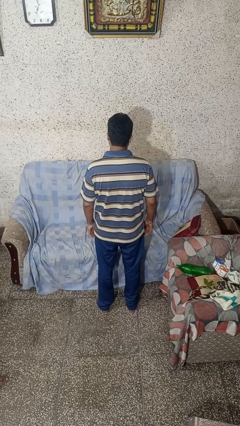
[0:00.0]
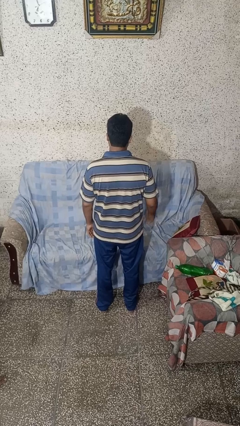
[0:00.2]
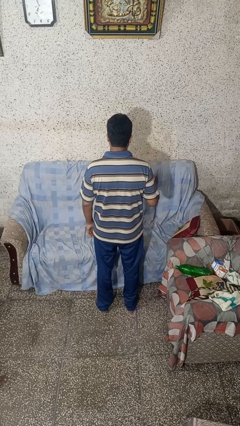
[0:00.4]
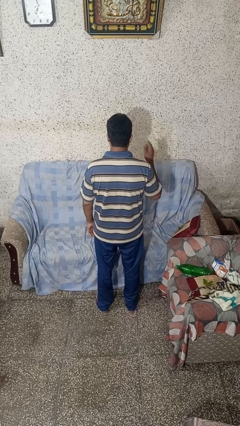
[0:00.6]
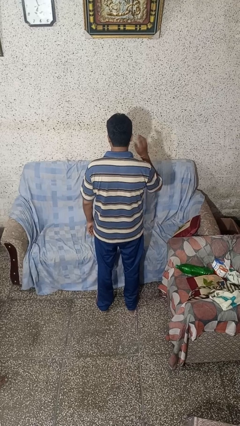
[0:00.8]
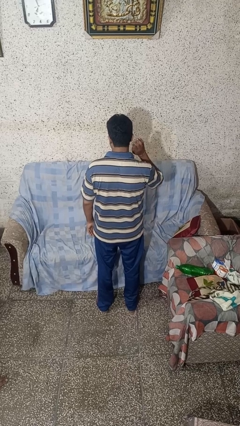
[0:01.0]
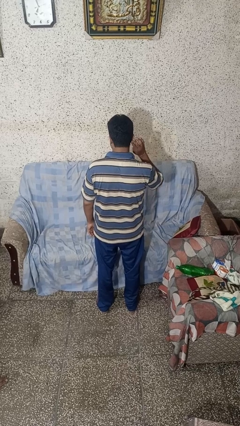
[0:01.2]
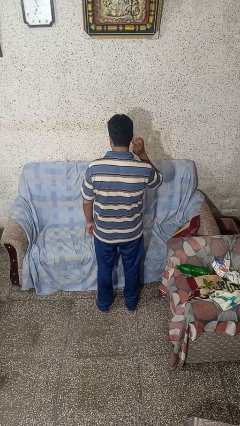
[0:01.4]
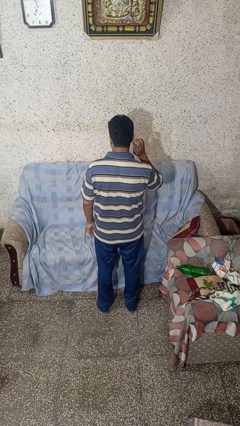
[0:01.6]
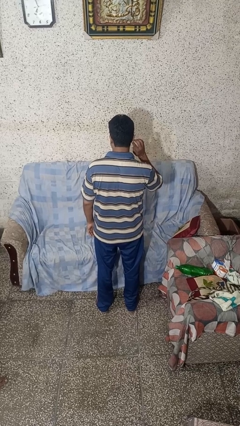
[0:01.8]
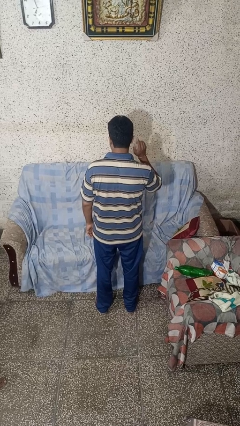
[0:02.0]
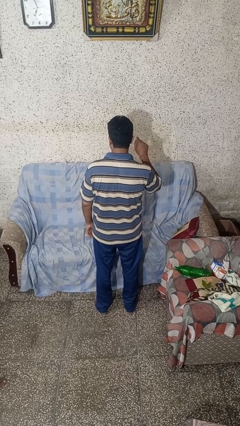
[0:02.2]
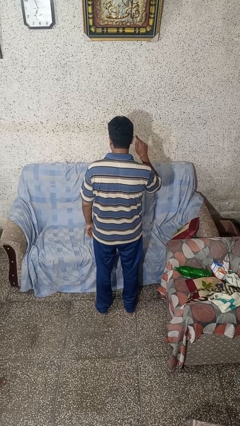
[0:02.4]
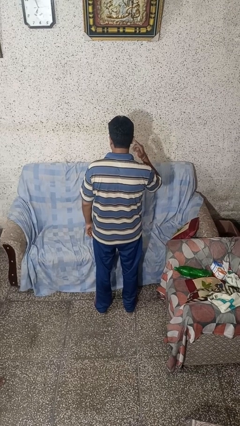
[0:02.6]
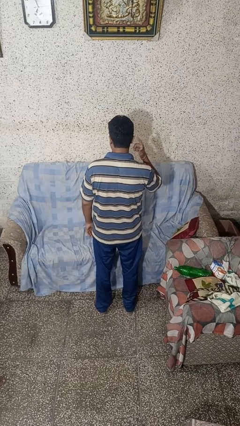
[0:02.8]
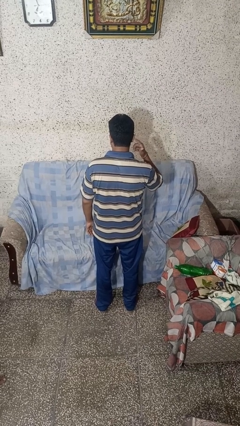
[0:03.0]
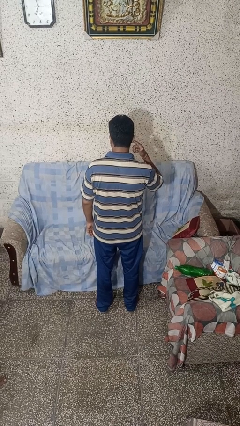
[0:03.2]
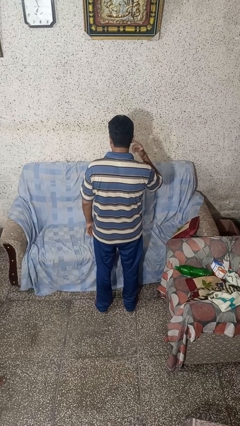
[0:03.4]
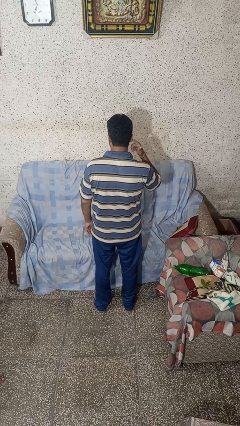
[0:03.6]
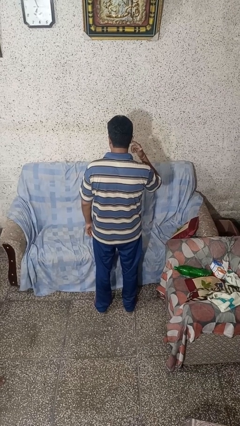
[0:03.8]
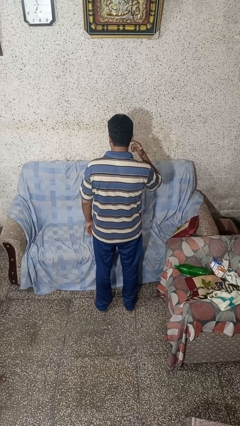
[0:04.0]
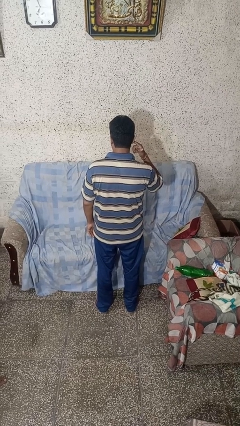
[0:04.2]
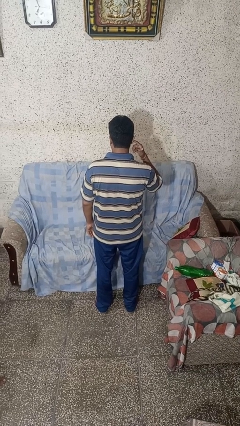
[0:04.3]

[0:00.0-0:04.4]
person gestures listen closely

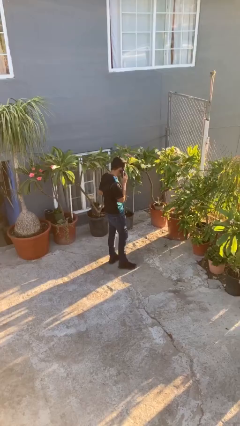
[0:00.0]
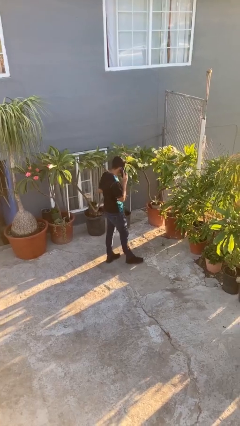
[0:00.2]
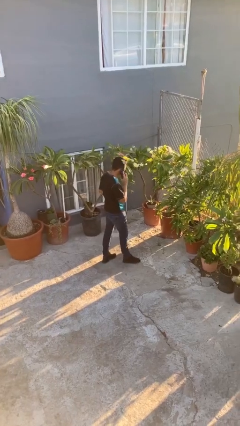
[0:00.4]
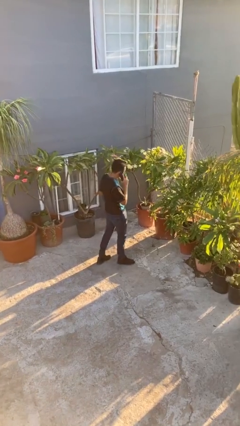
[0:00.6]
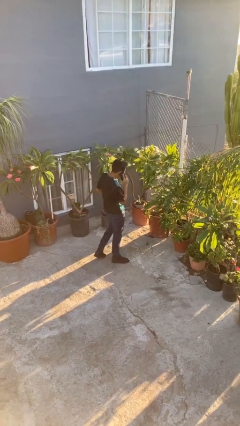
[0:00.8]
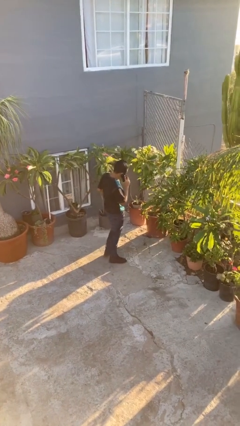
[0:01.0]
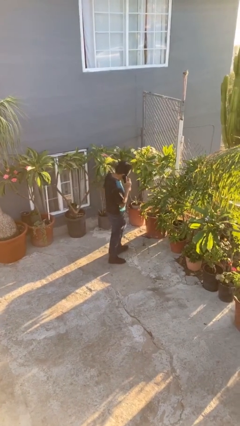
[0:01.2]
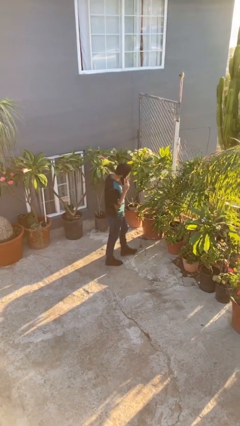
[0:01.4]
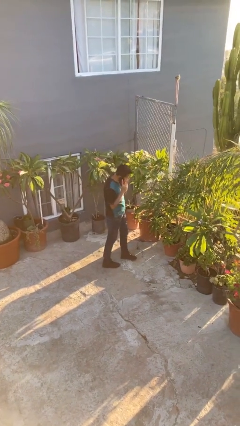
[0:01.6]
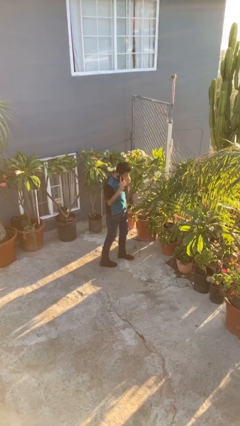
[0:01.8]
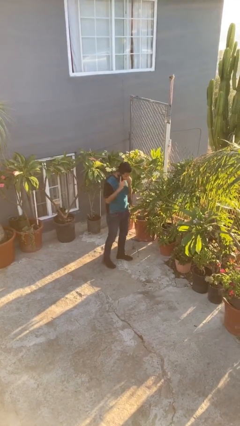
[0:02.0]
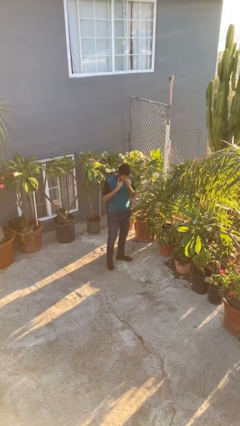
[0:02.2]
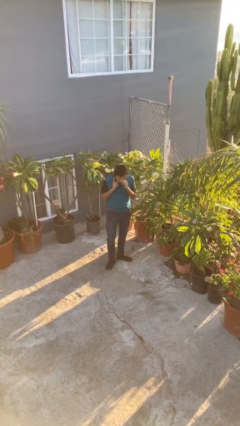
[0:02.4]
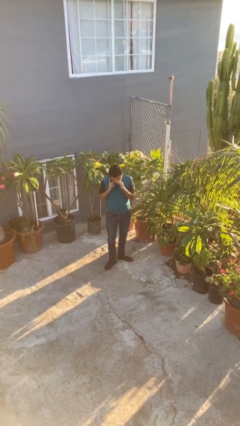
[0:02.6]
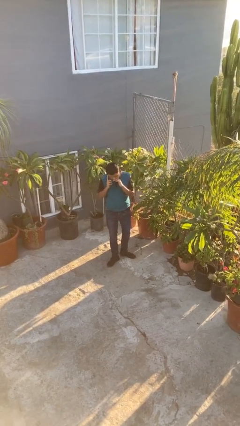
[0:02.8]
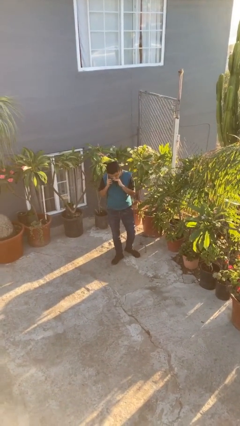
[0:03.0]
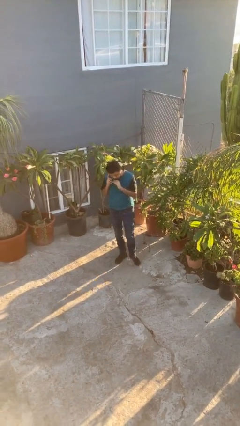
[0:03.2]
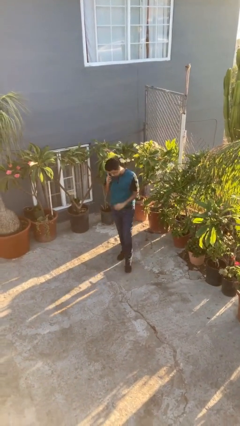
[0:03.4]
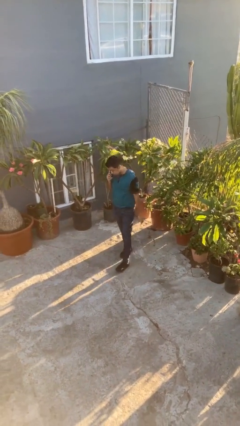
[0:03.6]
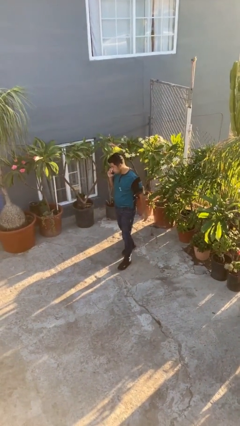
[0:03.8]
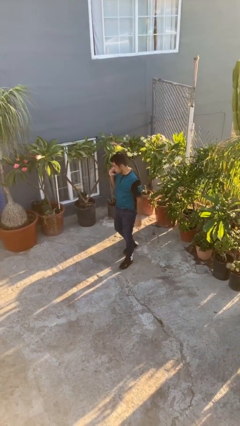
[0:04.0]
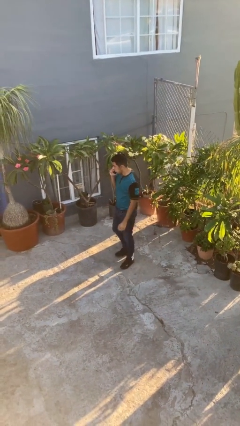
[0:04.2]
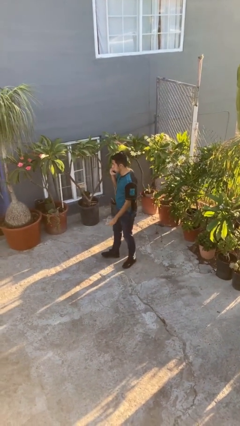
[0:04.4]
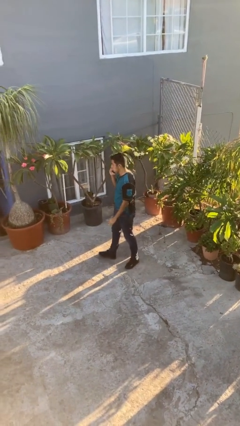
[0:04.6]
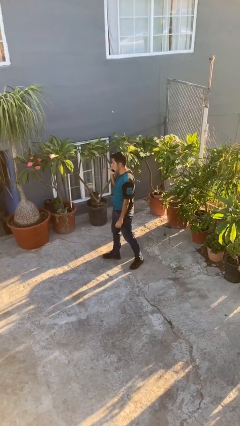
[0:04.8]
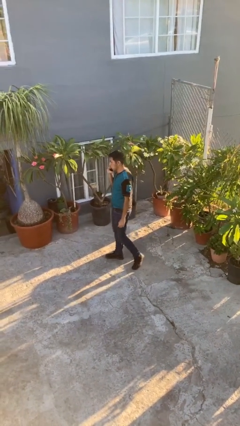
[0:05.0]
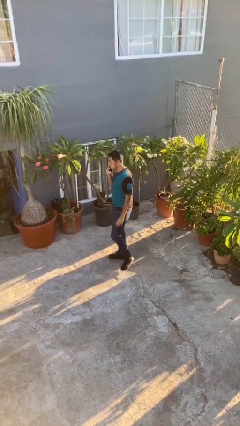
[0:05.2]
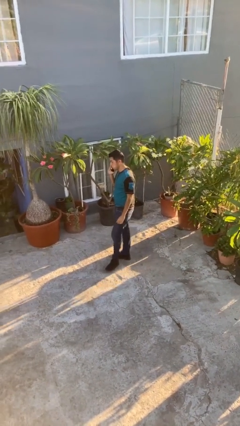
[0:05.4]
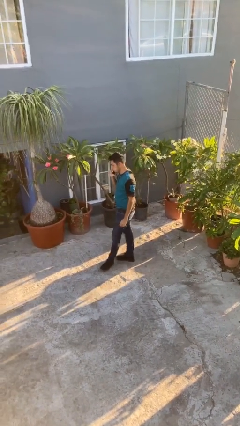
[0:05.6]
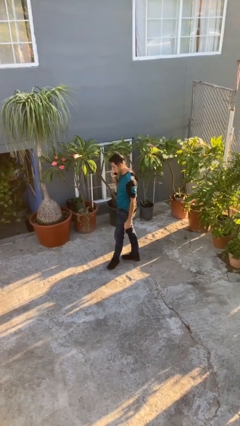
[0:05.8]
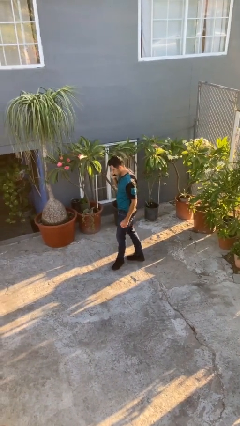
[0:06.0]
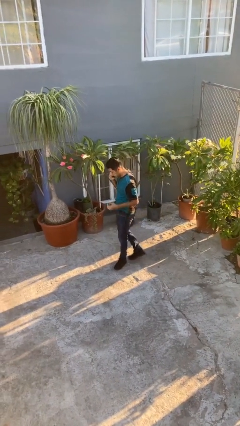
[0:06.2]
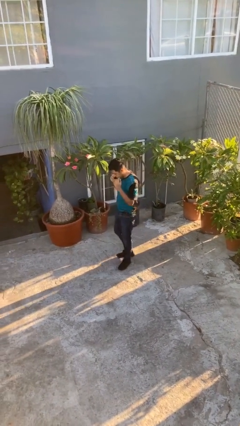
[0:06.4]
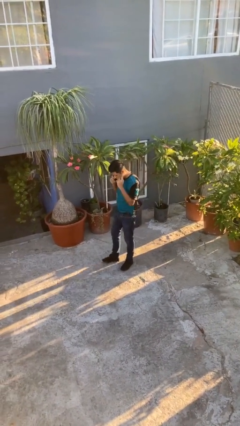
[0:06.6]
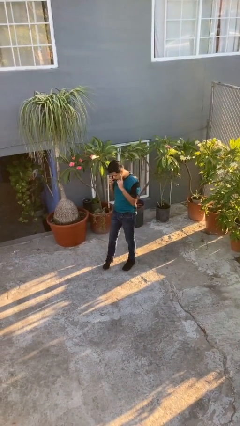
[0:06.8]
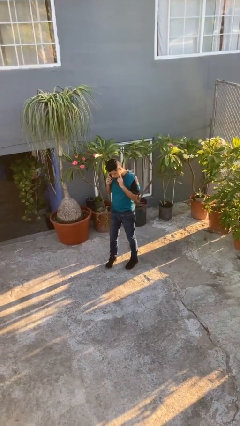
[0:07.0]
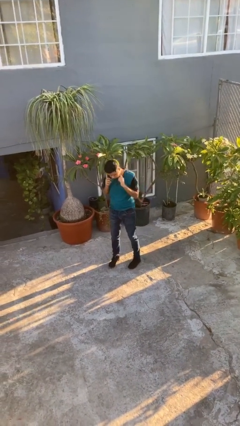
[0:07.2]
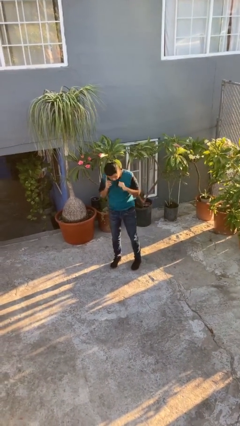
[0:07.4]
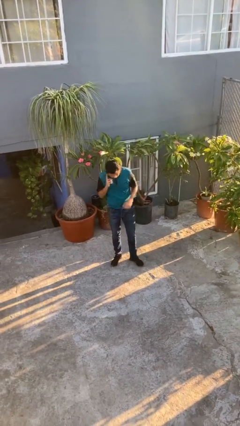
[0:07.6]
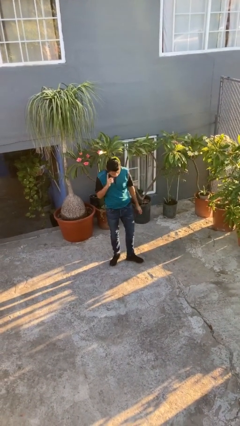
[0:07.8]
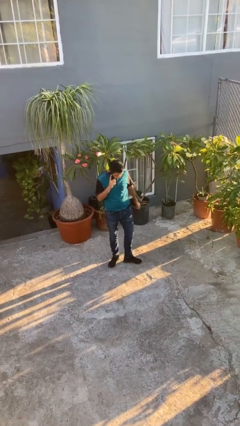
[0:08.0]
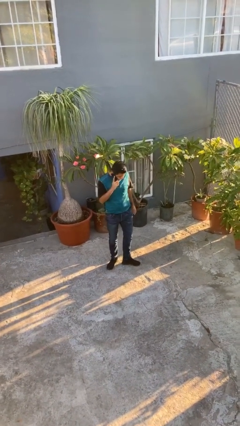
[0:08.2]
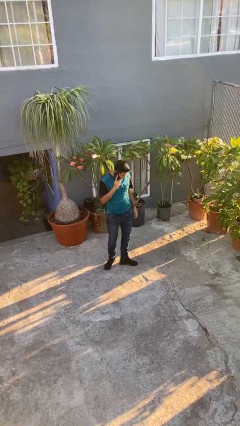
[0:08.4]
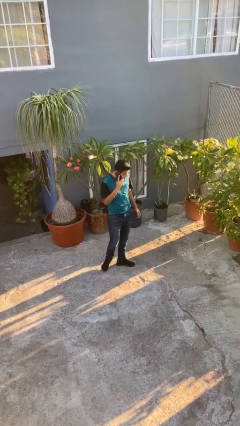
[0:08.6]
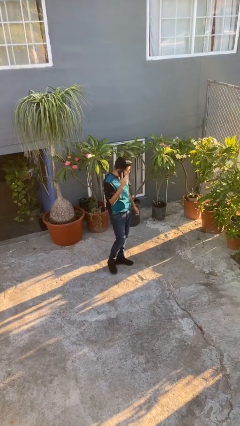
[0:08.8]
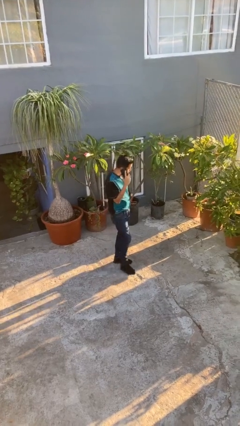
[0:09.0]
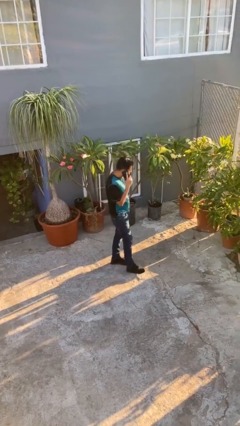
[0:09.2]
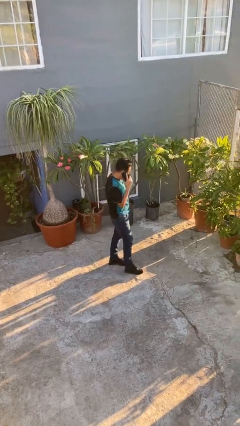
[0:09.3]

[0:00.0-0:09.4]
person talks on phone

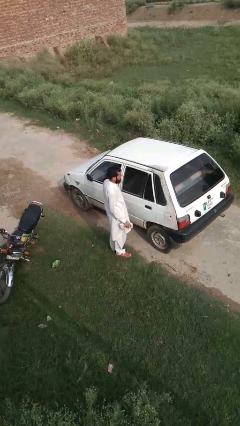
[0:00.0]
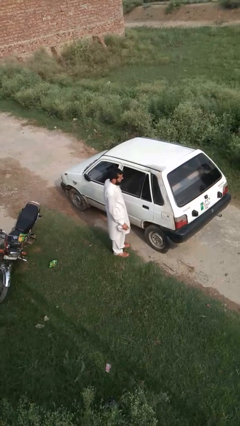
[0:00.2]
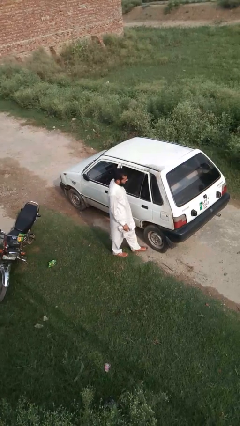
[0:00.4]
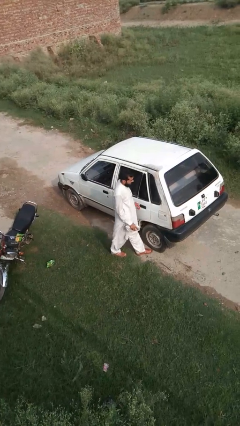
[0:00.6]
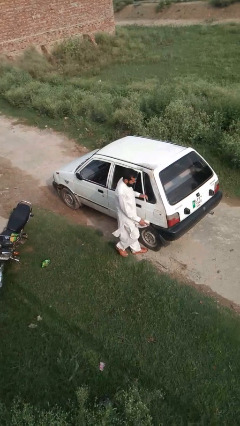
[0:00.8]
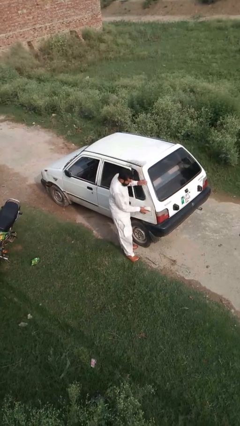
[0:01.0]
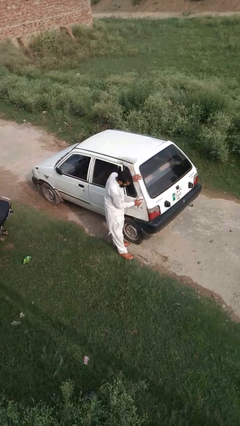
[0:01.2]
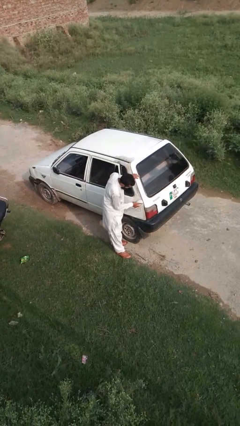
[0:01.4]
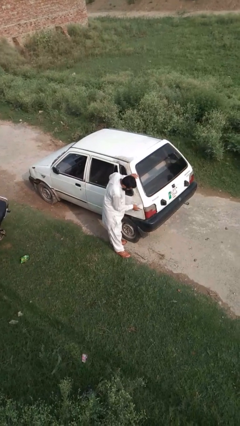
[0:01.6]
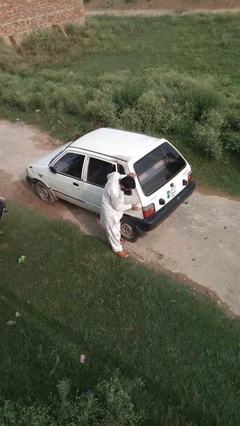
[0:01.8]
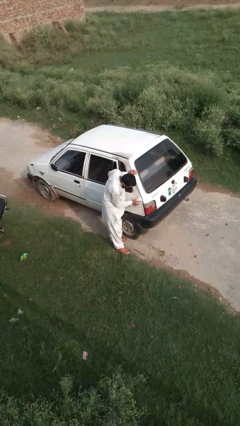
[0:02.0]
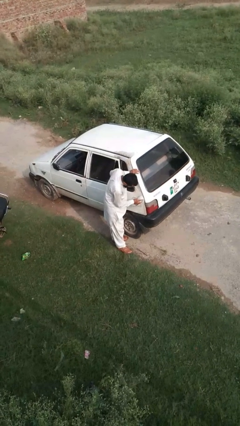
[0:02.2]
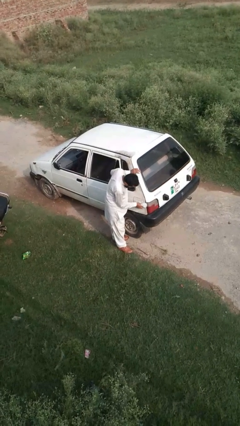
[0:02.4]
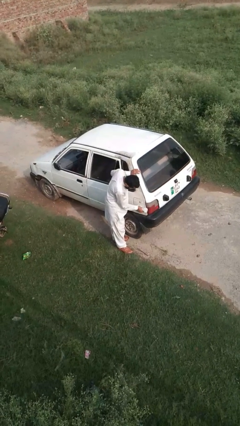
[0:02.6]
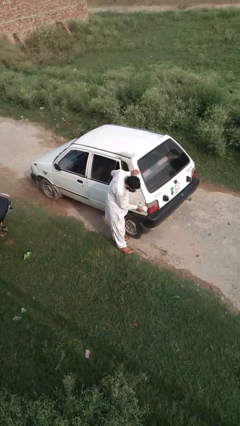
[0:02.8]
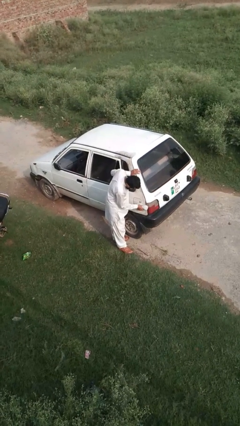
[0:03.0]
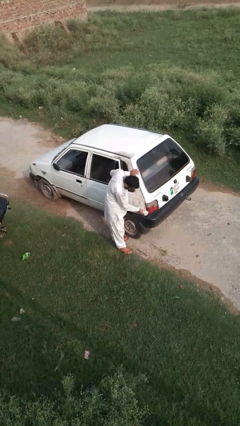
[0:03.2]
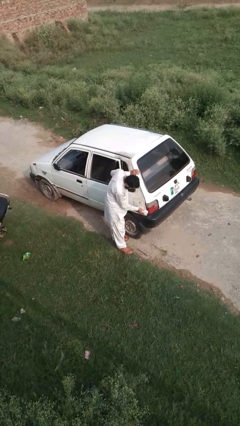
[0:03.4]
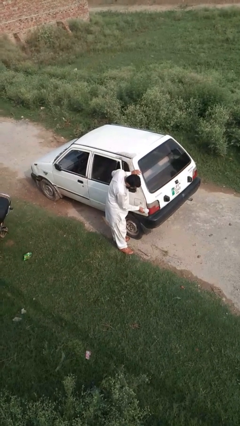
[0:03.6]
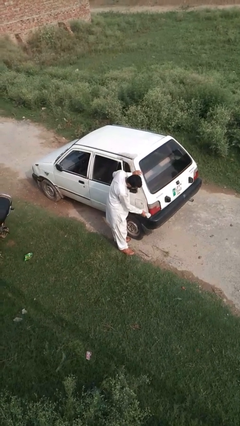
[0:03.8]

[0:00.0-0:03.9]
person polishes car with rag

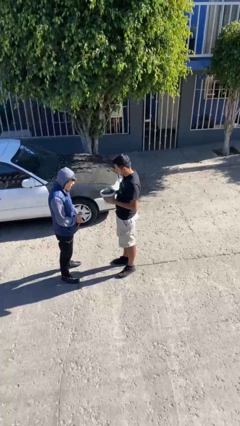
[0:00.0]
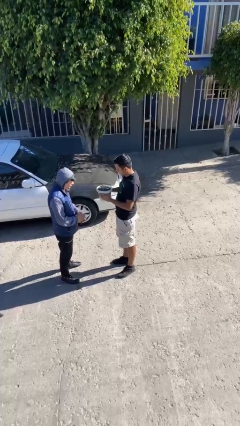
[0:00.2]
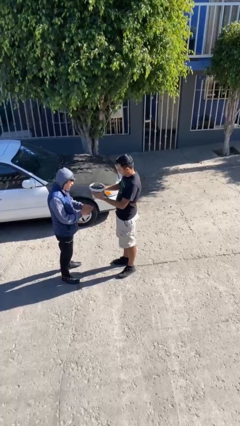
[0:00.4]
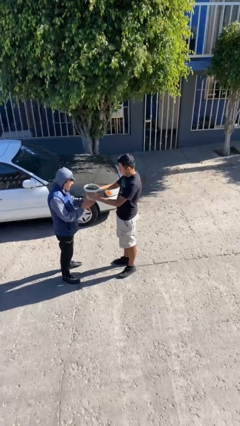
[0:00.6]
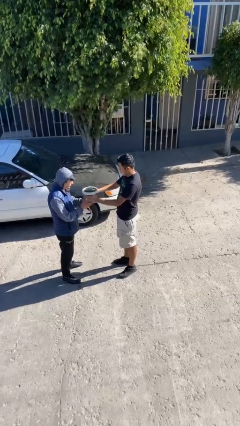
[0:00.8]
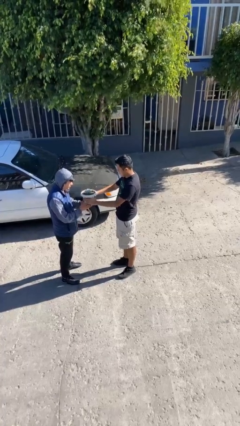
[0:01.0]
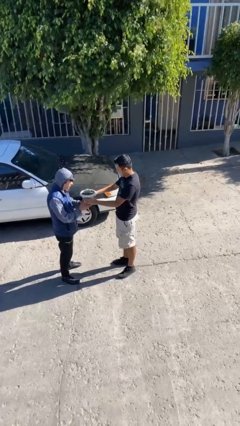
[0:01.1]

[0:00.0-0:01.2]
person transfers object to person
